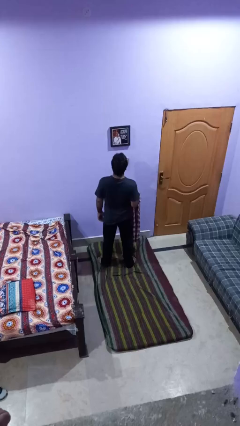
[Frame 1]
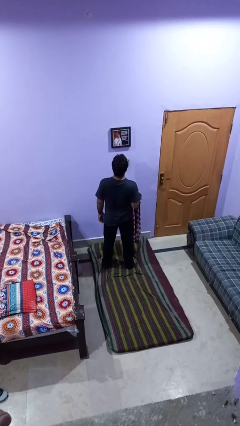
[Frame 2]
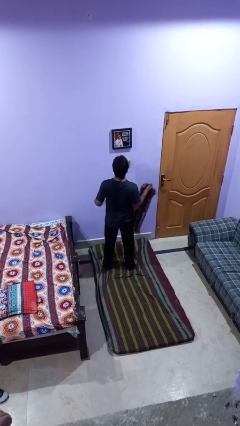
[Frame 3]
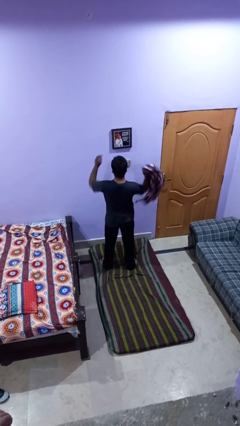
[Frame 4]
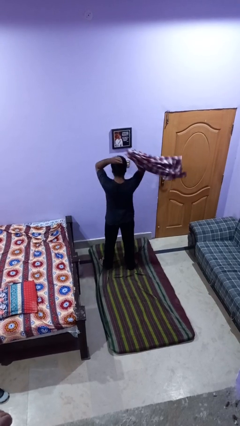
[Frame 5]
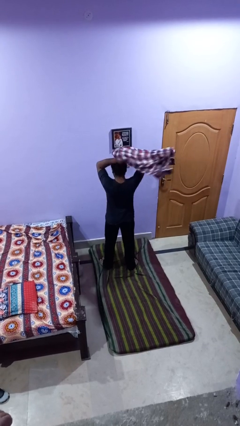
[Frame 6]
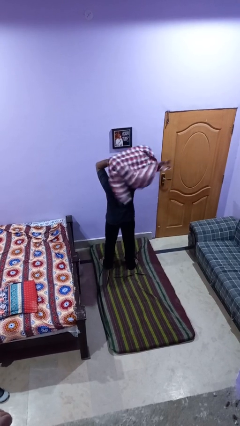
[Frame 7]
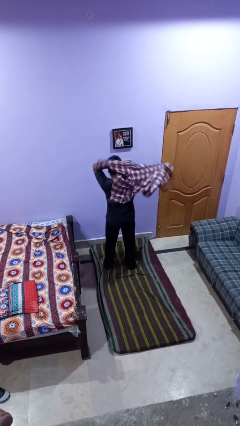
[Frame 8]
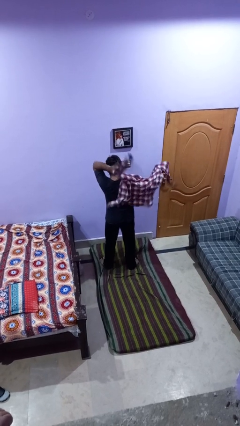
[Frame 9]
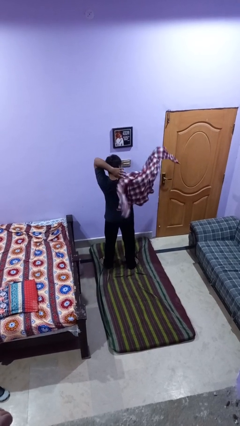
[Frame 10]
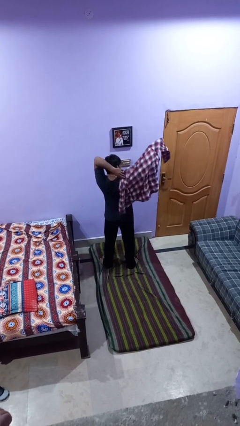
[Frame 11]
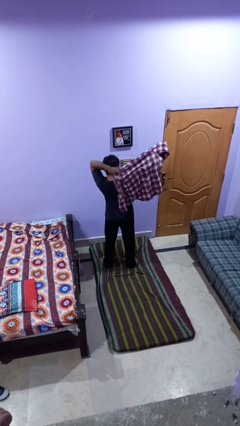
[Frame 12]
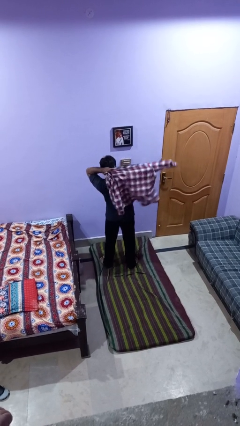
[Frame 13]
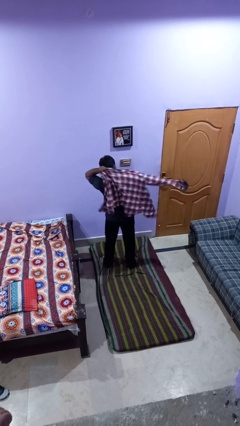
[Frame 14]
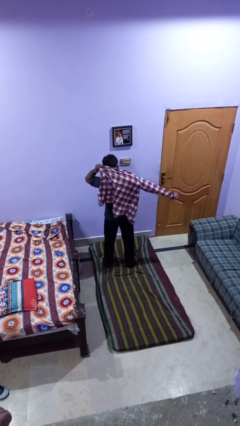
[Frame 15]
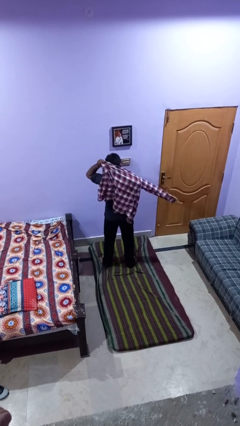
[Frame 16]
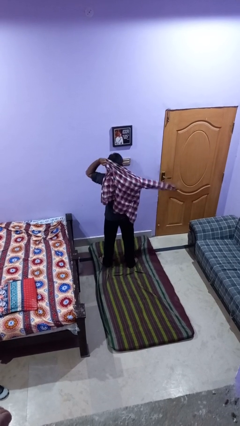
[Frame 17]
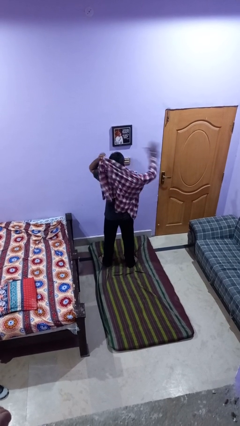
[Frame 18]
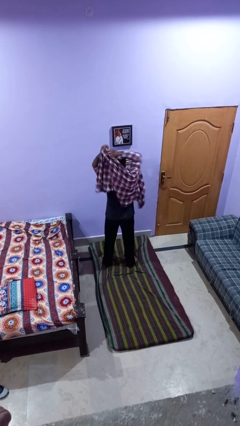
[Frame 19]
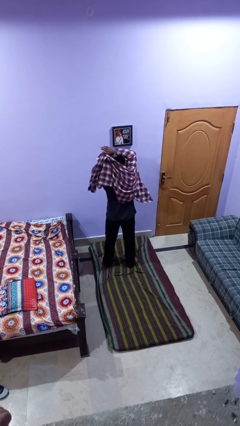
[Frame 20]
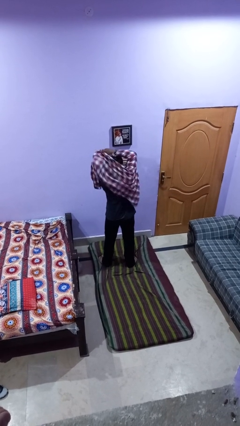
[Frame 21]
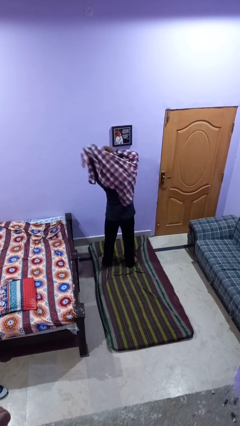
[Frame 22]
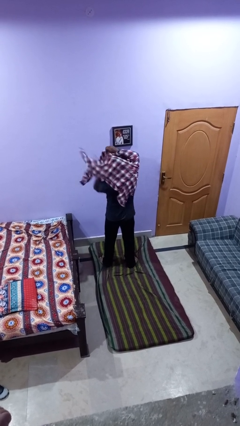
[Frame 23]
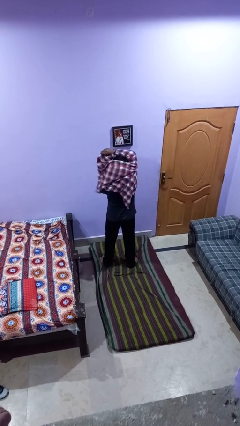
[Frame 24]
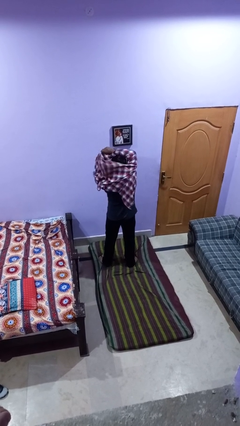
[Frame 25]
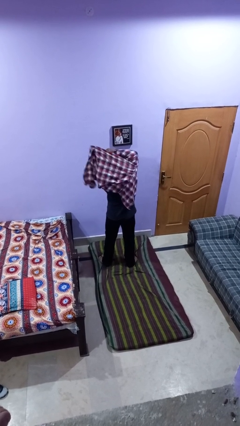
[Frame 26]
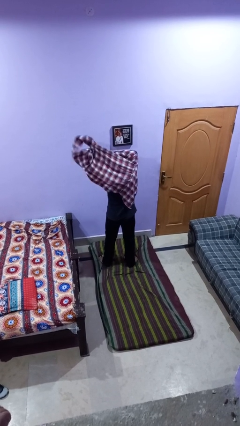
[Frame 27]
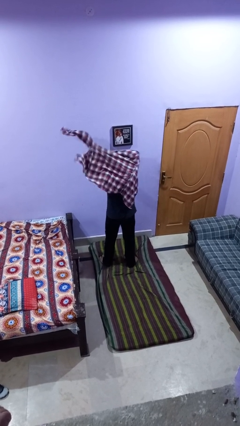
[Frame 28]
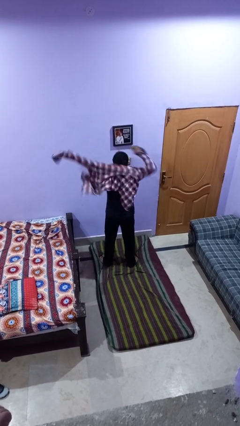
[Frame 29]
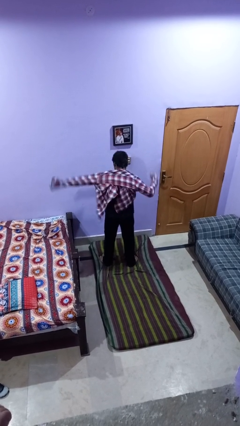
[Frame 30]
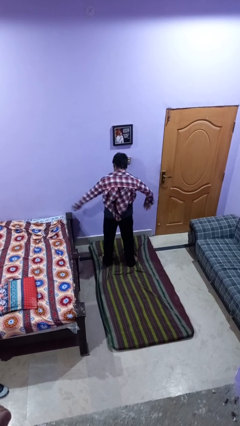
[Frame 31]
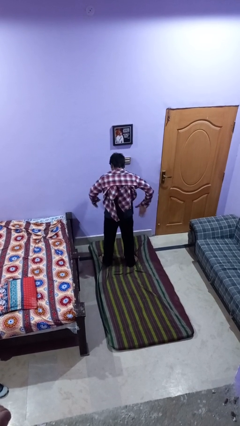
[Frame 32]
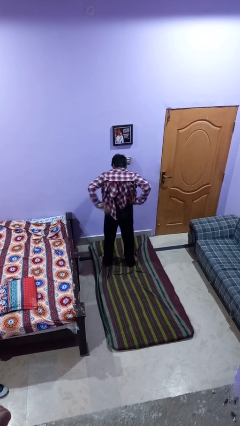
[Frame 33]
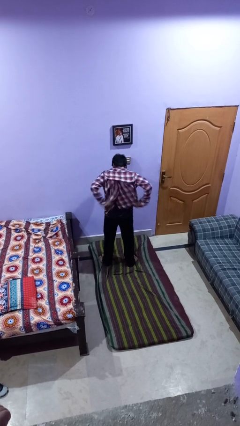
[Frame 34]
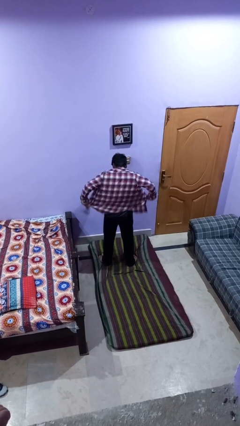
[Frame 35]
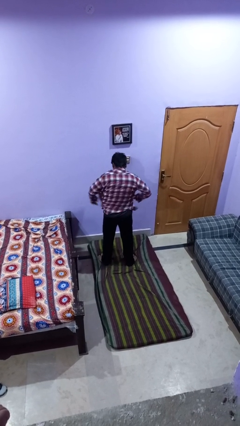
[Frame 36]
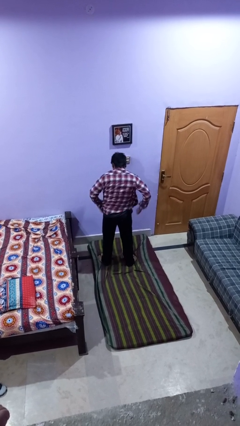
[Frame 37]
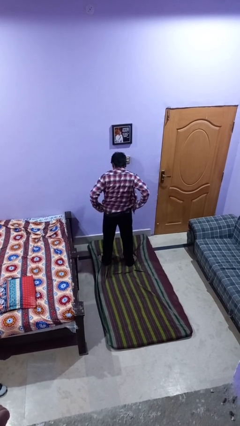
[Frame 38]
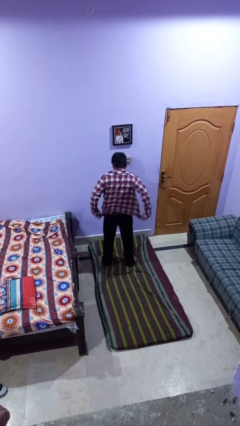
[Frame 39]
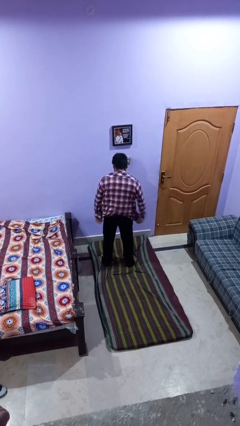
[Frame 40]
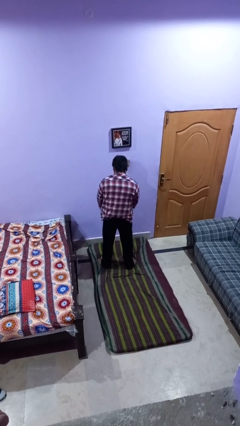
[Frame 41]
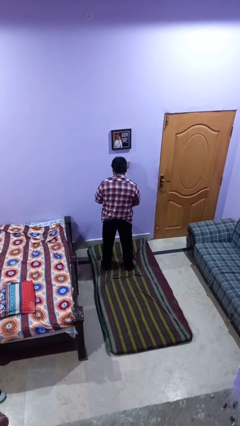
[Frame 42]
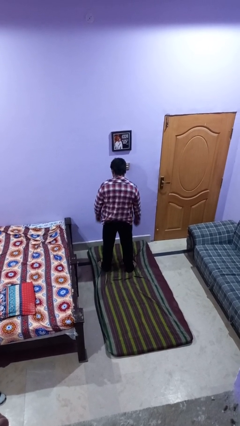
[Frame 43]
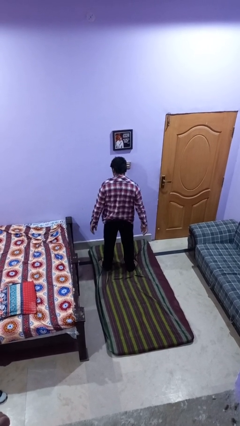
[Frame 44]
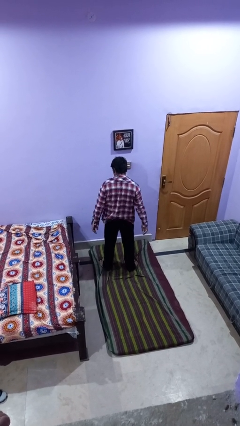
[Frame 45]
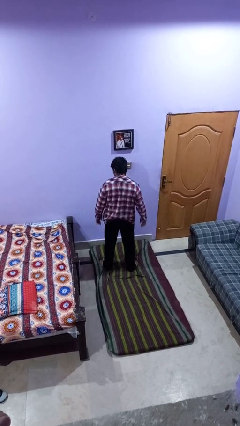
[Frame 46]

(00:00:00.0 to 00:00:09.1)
person puts on shirt

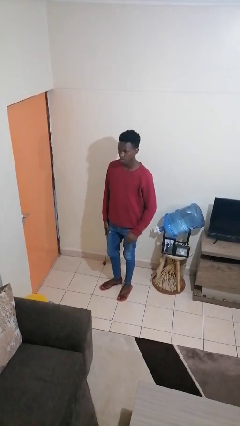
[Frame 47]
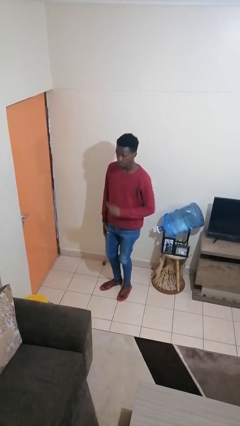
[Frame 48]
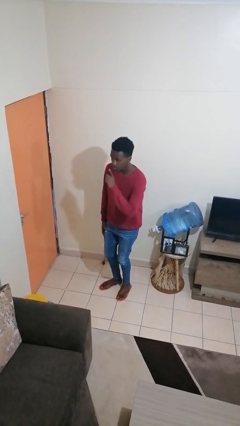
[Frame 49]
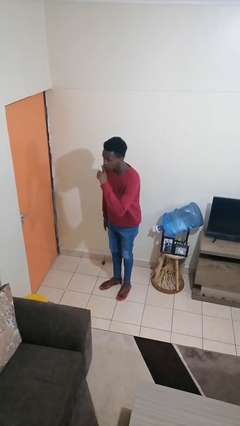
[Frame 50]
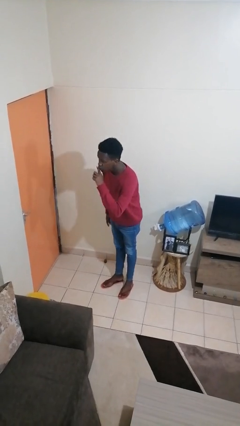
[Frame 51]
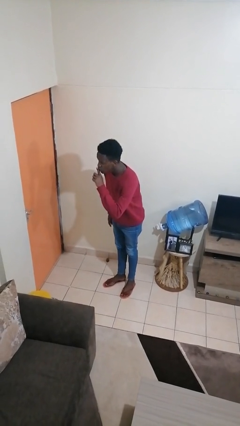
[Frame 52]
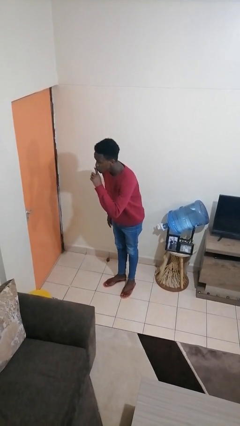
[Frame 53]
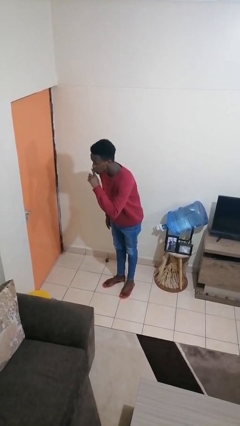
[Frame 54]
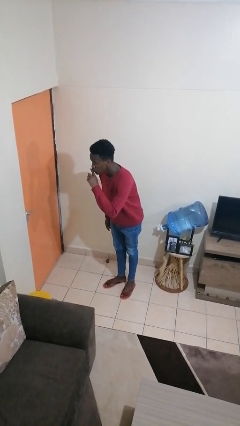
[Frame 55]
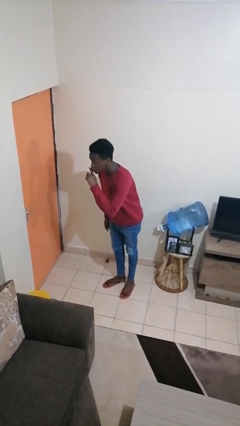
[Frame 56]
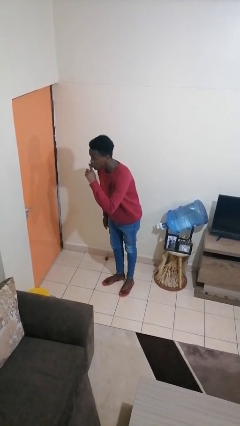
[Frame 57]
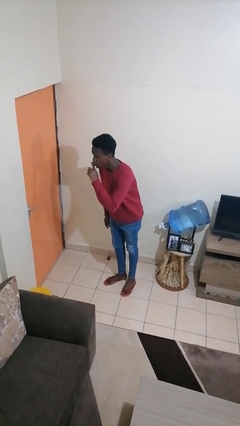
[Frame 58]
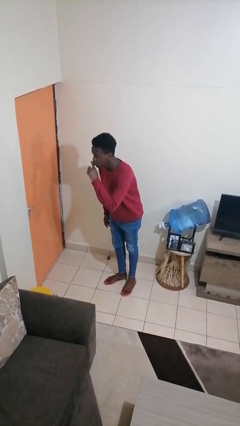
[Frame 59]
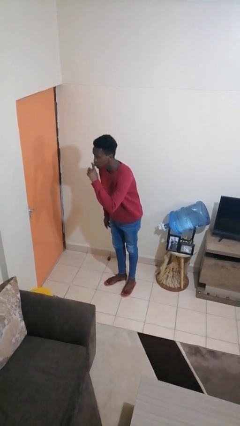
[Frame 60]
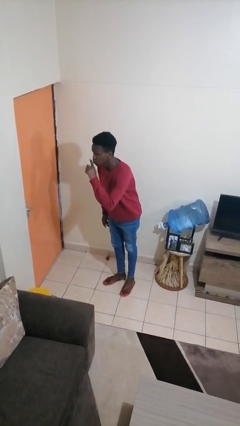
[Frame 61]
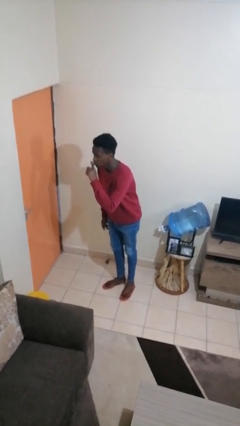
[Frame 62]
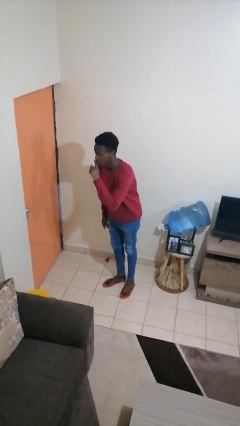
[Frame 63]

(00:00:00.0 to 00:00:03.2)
person gestures be quiet

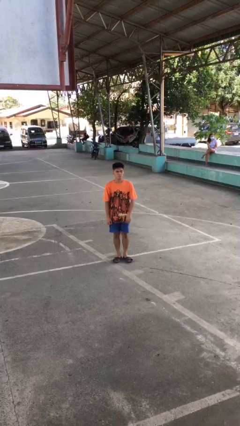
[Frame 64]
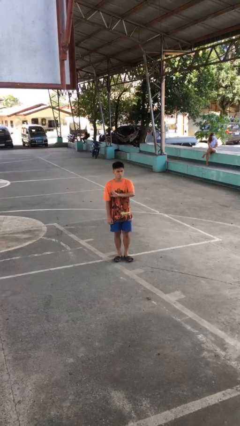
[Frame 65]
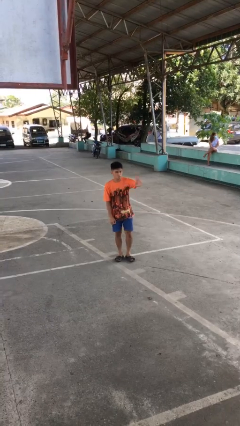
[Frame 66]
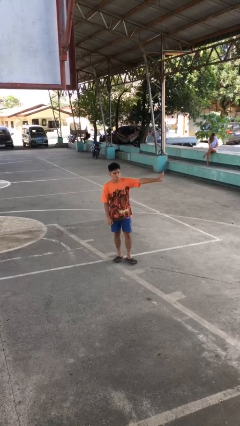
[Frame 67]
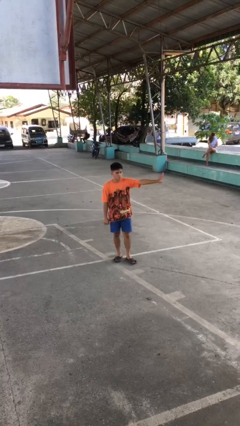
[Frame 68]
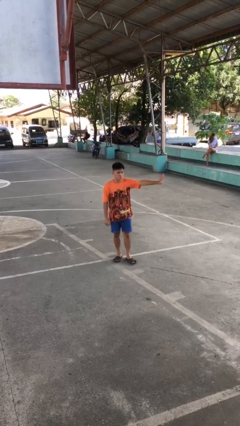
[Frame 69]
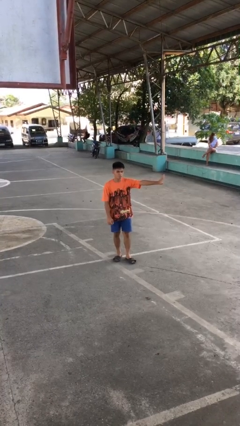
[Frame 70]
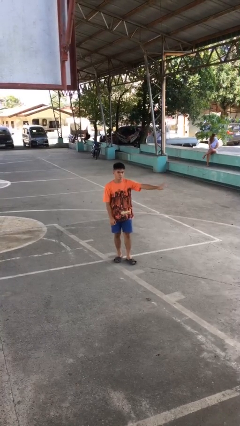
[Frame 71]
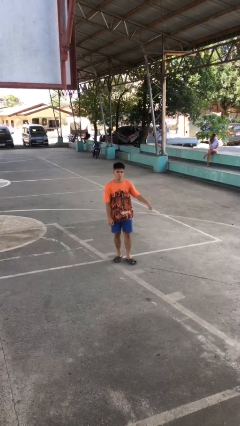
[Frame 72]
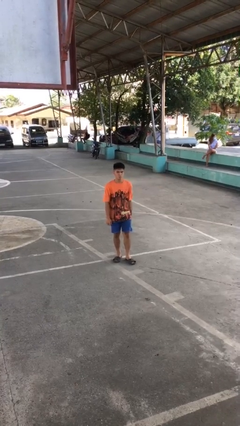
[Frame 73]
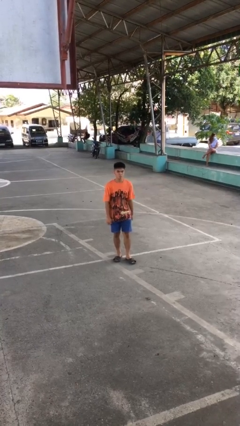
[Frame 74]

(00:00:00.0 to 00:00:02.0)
person gestures swipe left

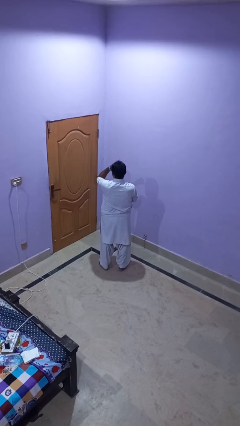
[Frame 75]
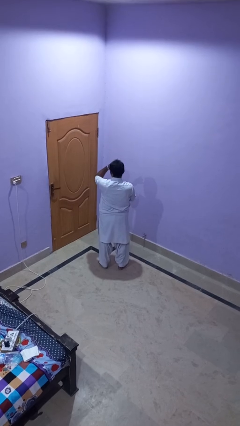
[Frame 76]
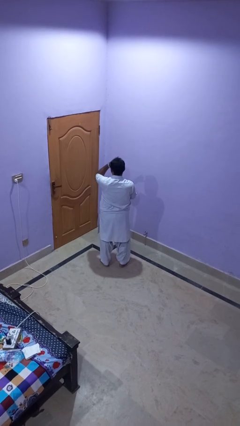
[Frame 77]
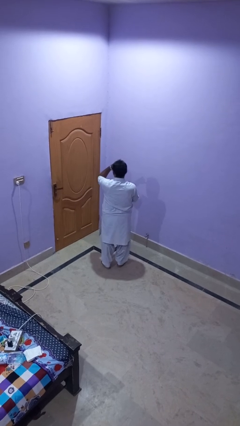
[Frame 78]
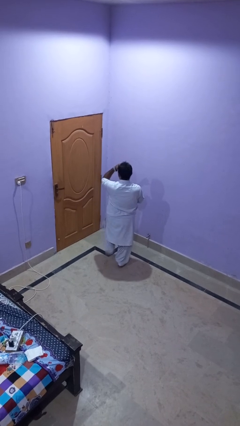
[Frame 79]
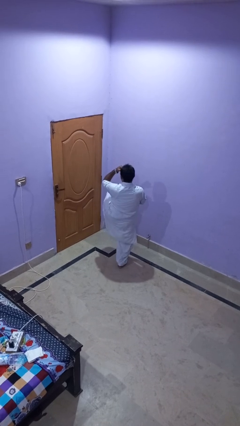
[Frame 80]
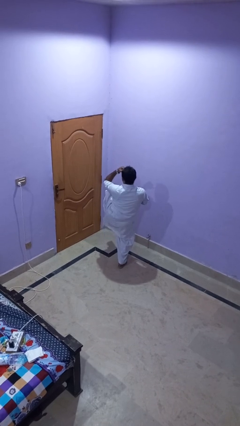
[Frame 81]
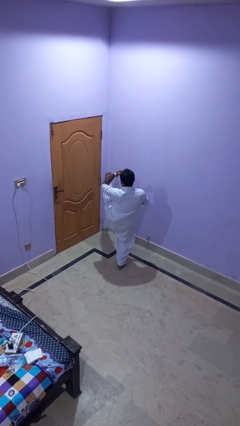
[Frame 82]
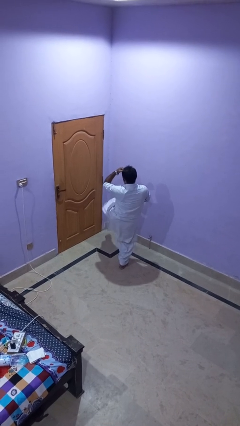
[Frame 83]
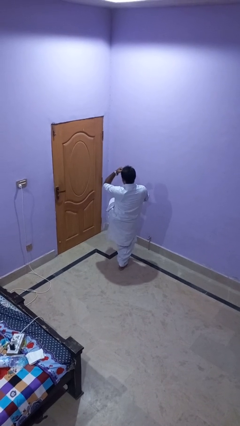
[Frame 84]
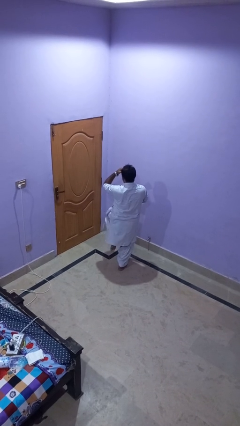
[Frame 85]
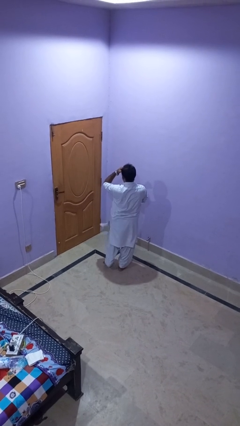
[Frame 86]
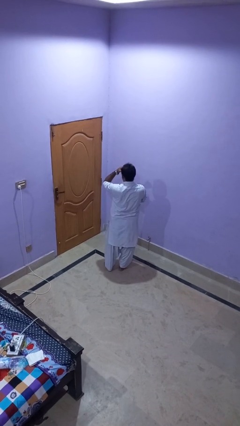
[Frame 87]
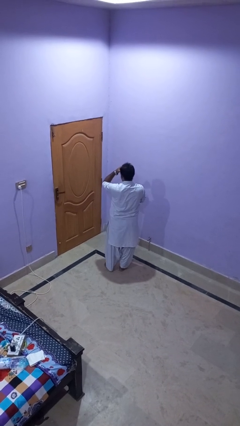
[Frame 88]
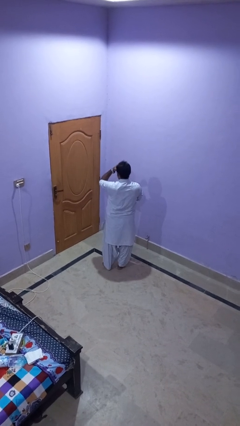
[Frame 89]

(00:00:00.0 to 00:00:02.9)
person karate kicks

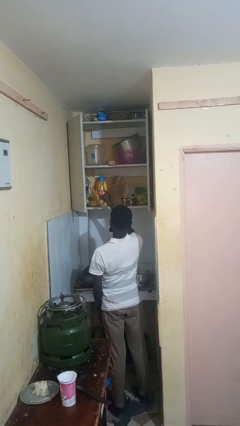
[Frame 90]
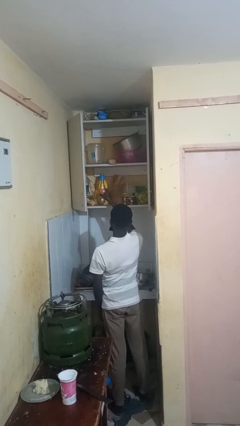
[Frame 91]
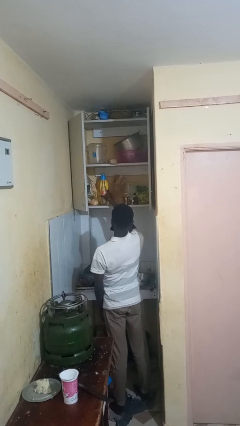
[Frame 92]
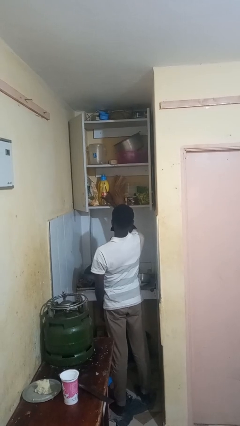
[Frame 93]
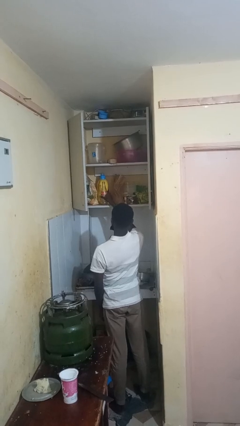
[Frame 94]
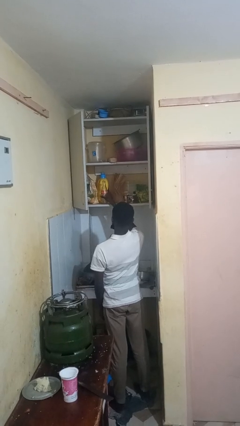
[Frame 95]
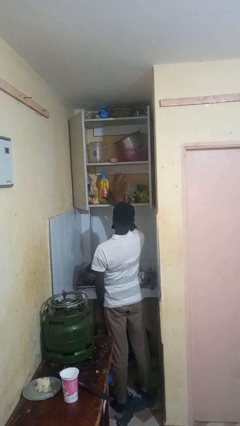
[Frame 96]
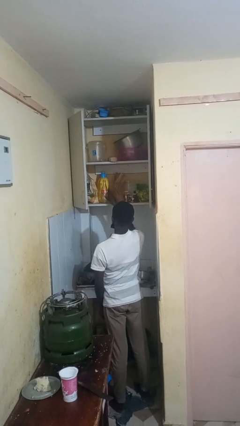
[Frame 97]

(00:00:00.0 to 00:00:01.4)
person puts down object into cabinet
